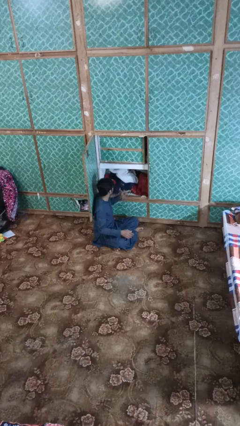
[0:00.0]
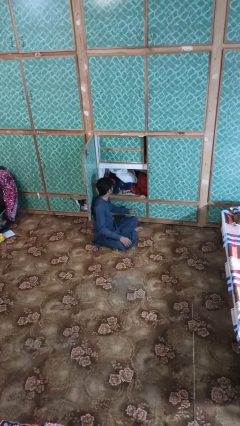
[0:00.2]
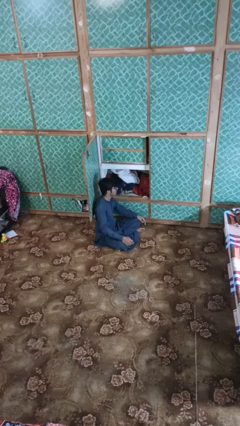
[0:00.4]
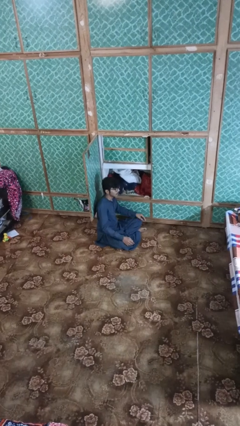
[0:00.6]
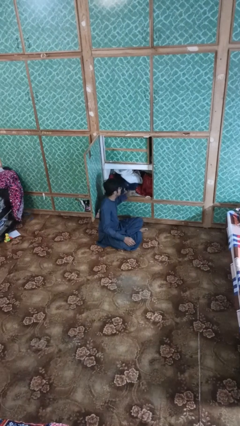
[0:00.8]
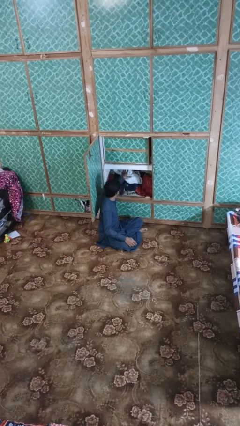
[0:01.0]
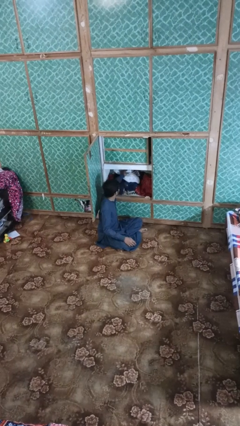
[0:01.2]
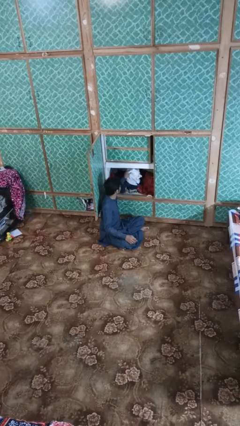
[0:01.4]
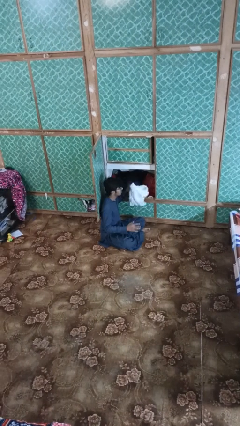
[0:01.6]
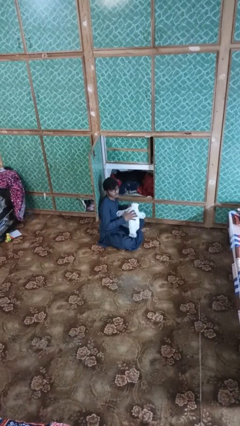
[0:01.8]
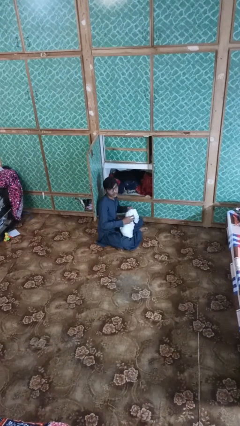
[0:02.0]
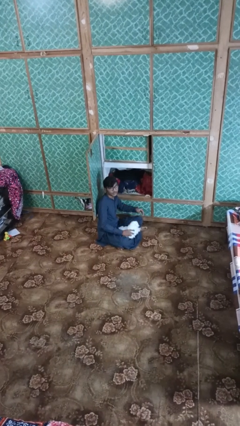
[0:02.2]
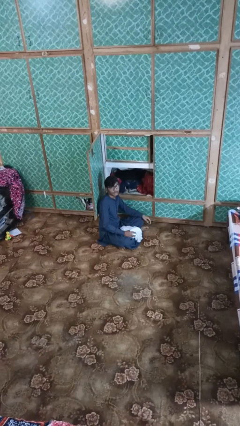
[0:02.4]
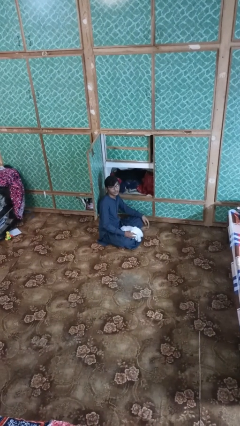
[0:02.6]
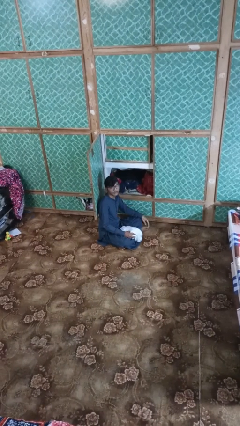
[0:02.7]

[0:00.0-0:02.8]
person takes clothes from dresser

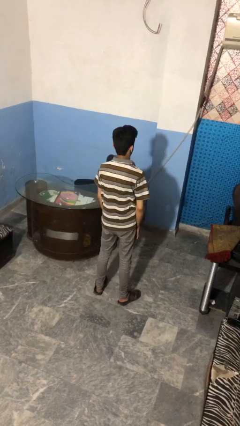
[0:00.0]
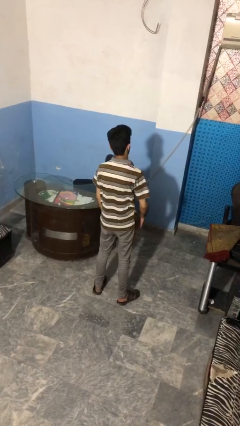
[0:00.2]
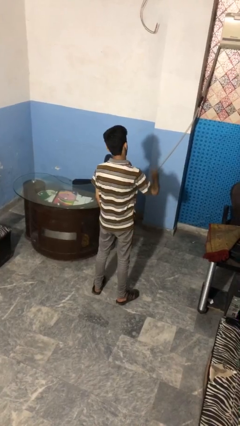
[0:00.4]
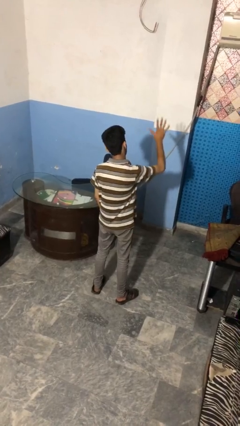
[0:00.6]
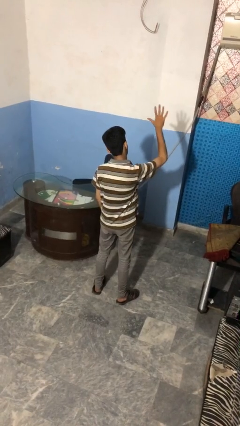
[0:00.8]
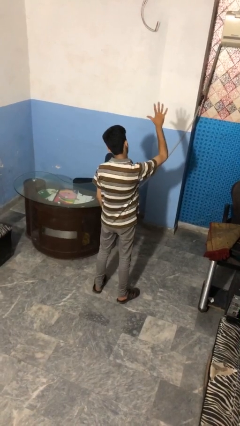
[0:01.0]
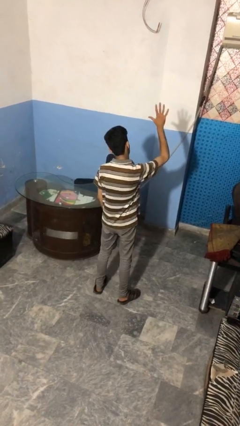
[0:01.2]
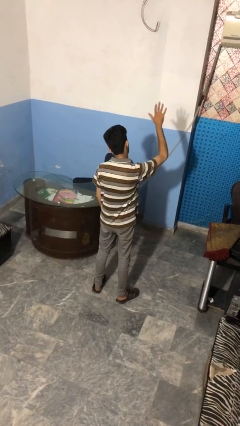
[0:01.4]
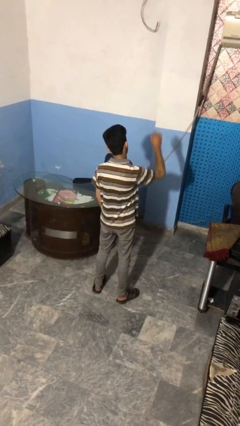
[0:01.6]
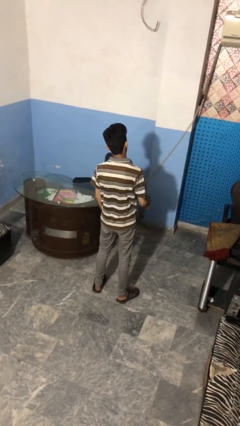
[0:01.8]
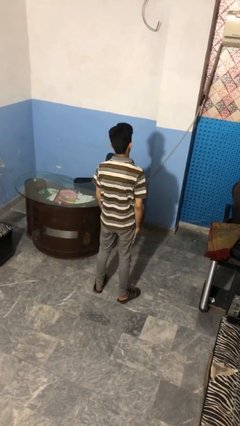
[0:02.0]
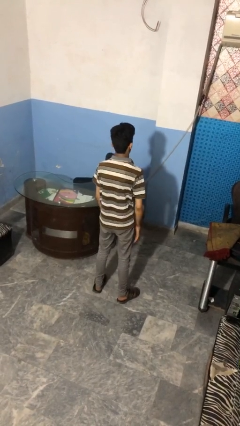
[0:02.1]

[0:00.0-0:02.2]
person gestures number five

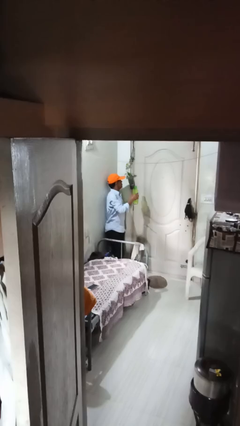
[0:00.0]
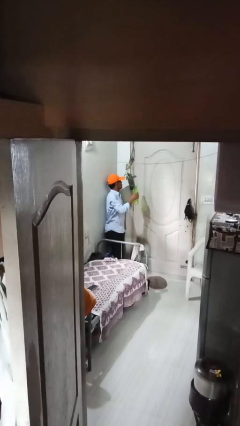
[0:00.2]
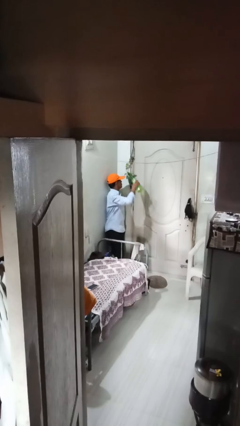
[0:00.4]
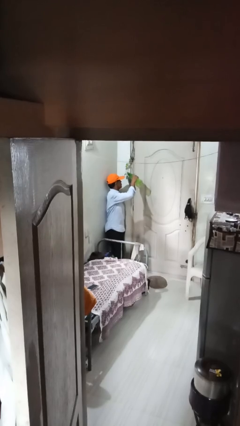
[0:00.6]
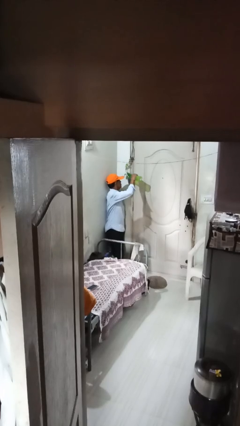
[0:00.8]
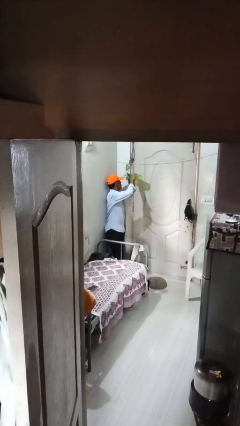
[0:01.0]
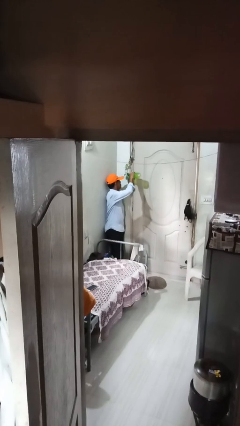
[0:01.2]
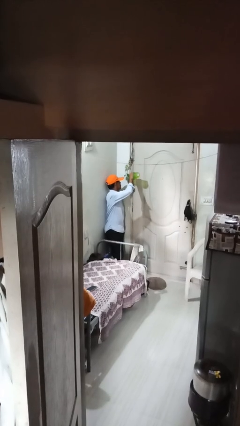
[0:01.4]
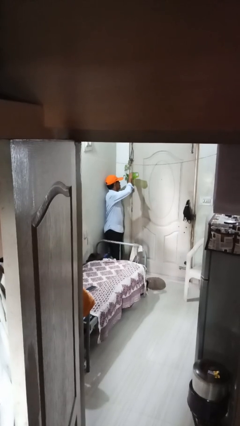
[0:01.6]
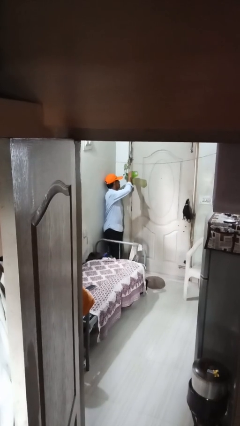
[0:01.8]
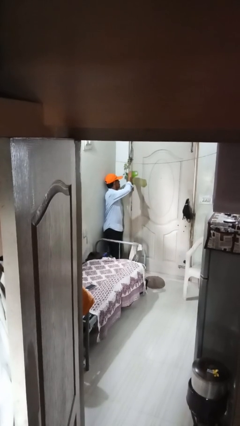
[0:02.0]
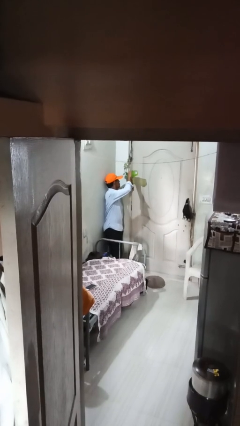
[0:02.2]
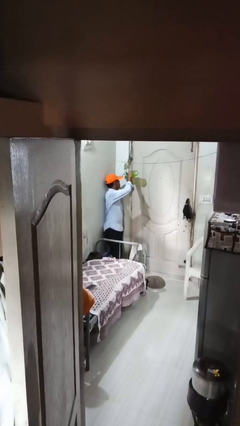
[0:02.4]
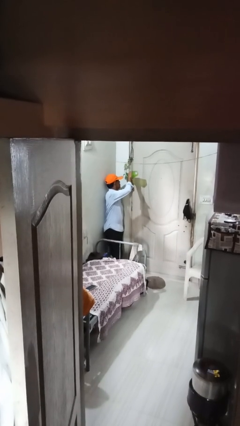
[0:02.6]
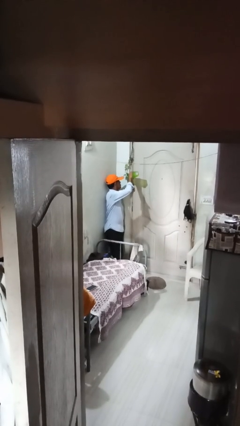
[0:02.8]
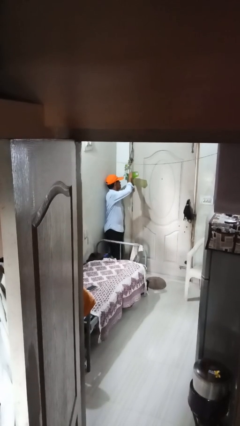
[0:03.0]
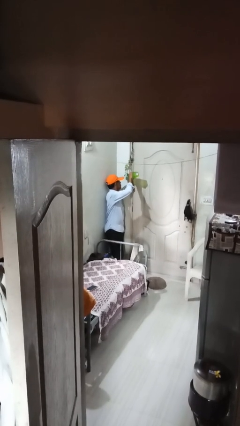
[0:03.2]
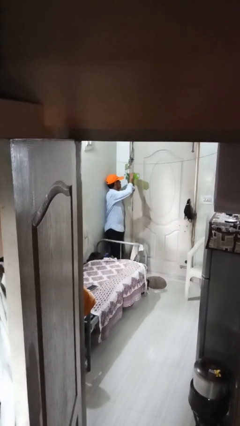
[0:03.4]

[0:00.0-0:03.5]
person waters houseplant

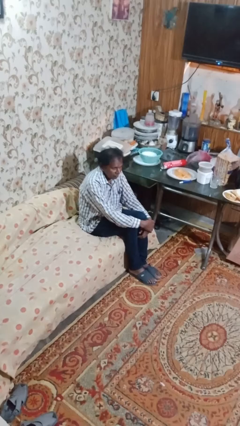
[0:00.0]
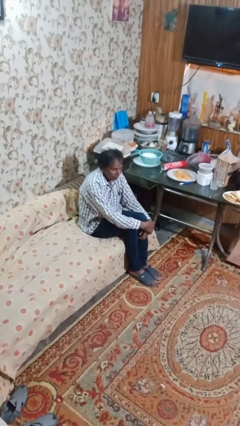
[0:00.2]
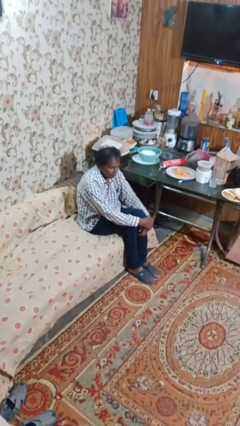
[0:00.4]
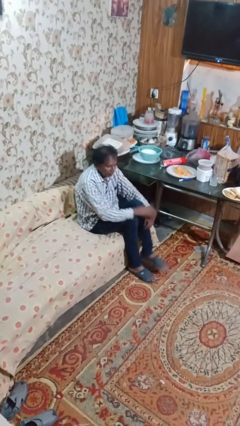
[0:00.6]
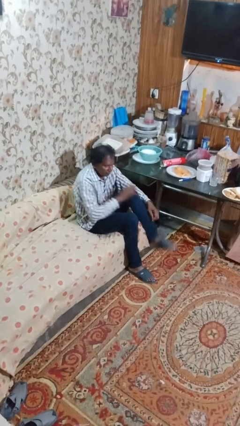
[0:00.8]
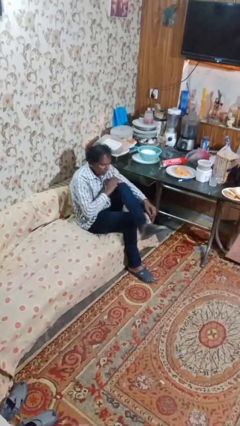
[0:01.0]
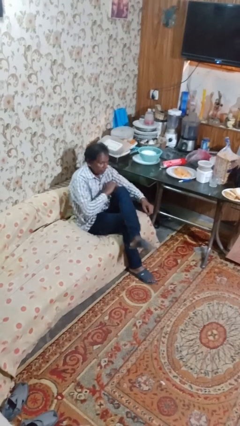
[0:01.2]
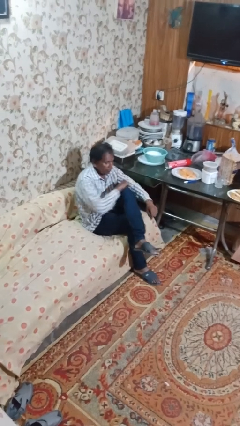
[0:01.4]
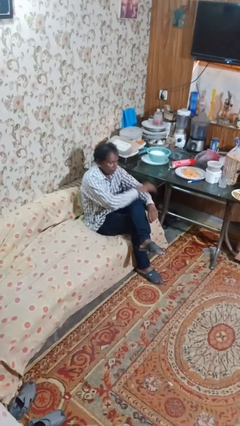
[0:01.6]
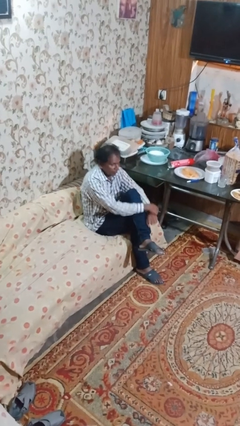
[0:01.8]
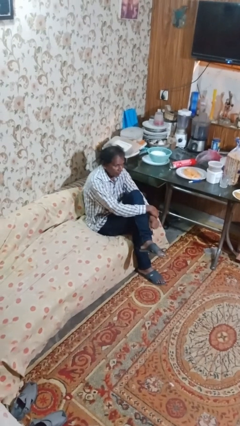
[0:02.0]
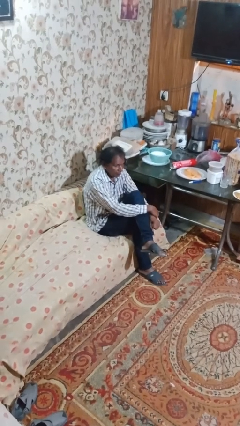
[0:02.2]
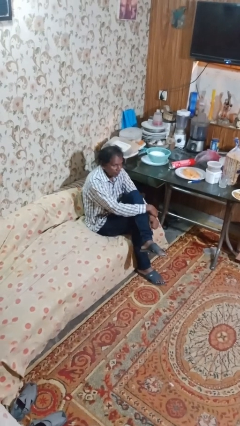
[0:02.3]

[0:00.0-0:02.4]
person crosses legs

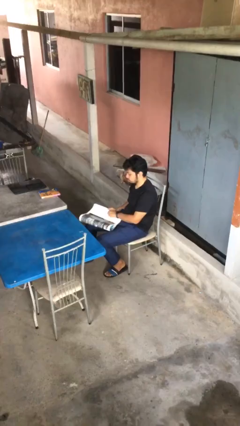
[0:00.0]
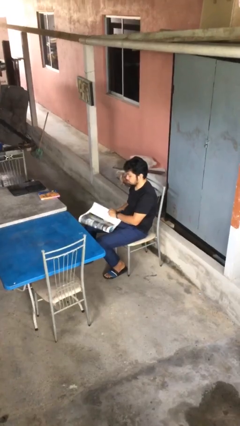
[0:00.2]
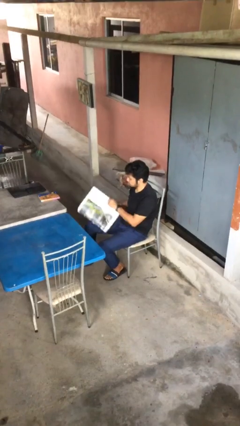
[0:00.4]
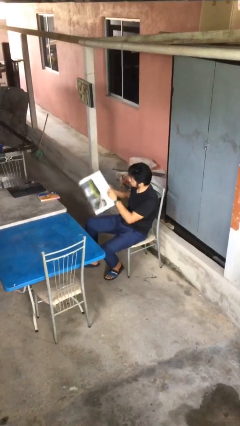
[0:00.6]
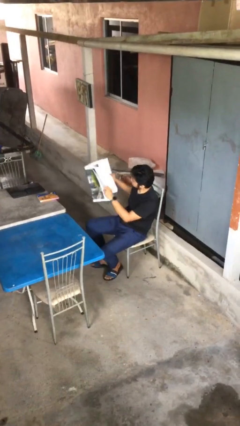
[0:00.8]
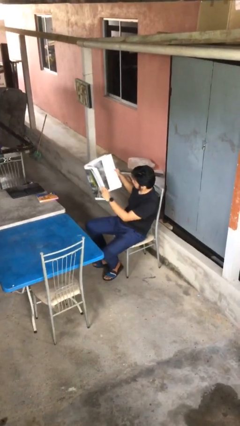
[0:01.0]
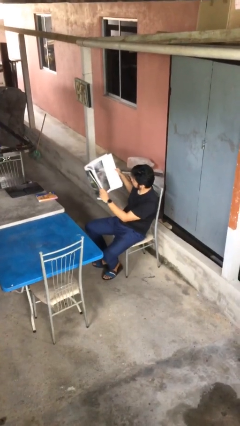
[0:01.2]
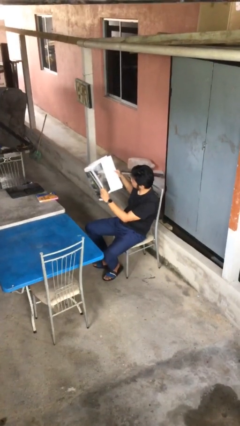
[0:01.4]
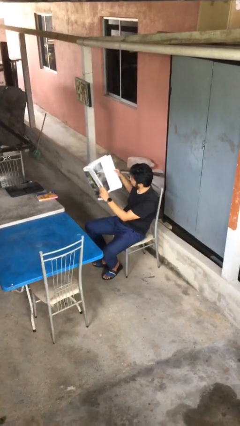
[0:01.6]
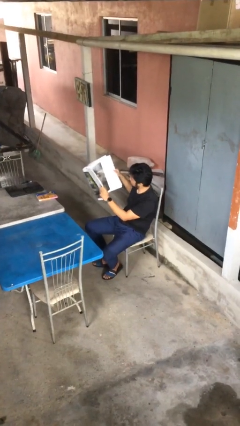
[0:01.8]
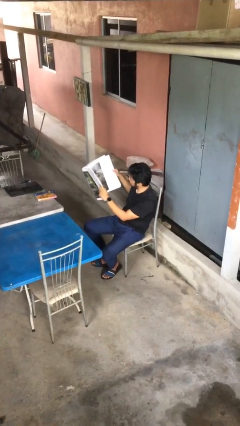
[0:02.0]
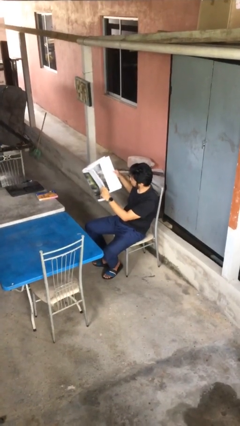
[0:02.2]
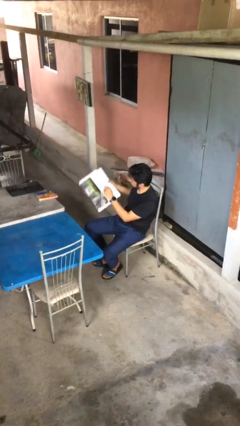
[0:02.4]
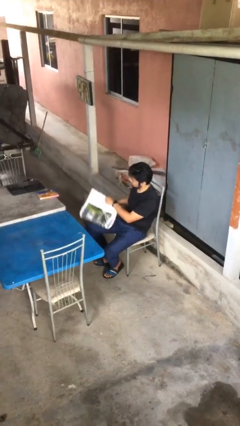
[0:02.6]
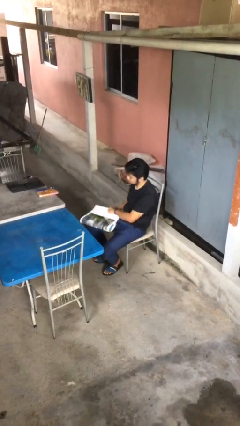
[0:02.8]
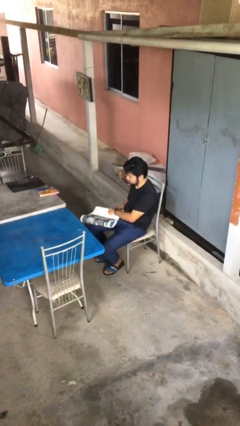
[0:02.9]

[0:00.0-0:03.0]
person reads newspaper

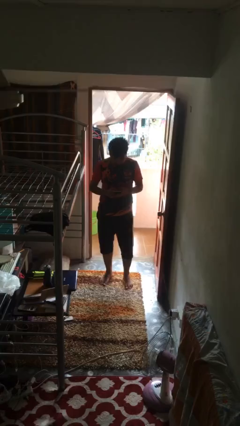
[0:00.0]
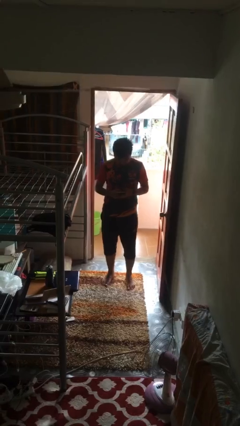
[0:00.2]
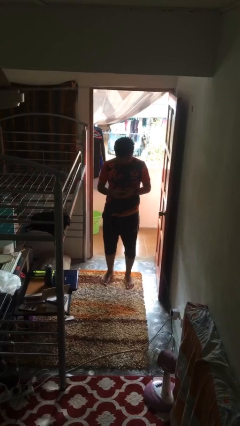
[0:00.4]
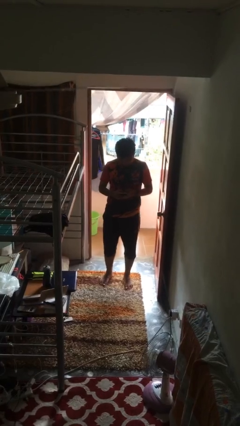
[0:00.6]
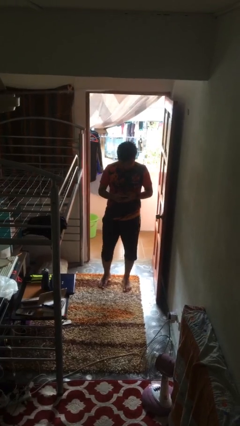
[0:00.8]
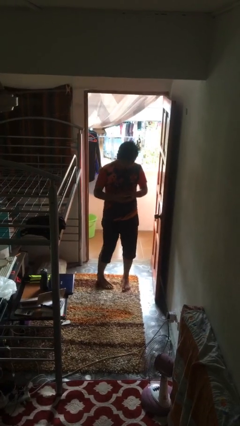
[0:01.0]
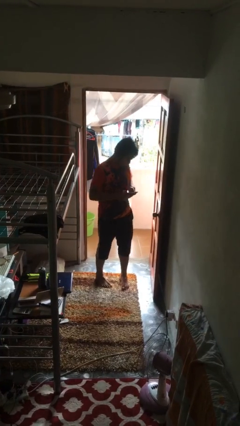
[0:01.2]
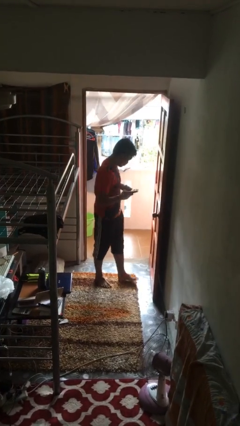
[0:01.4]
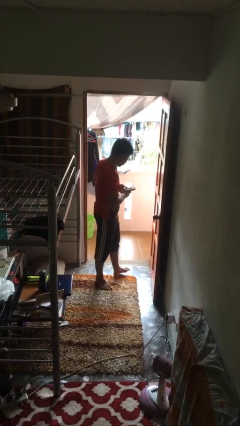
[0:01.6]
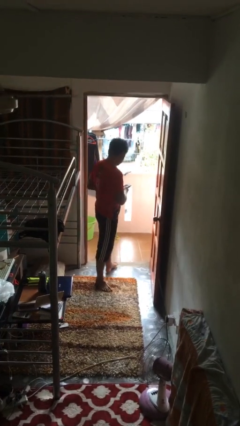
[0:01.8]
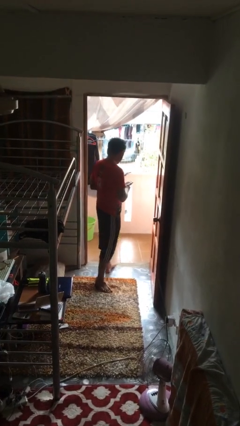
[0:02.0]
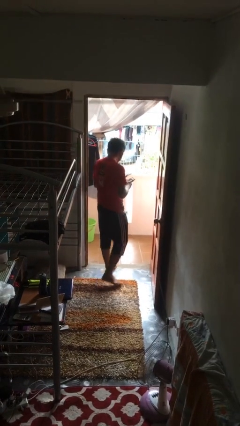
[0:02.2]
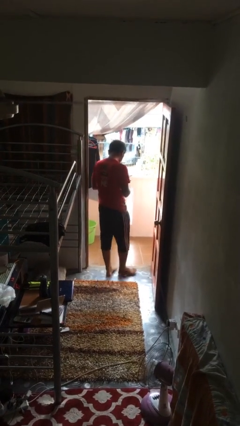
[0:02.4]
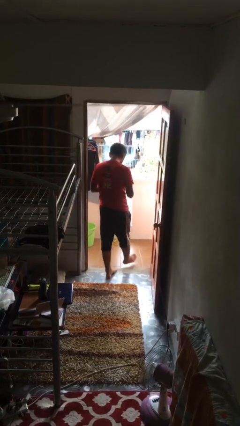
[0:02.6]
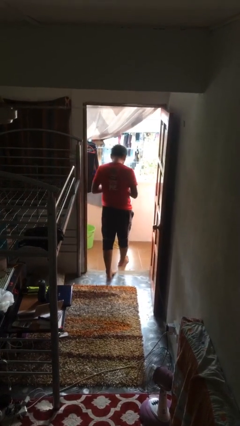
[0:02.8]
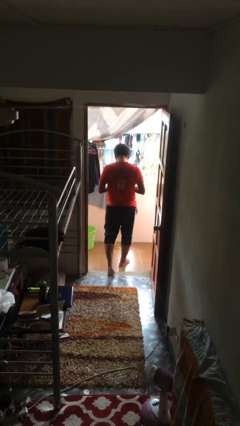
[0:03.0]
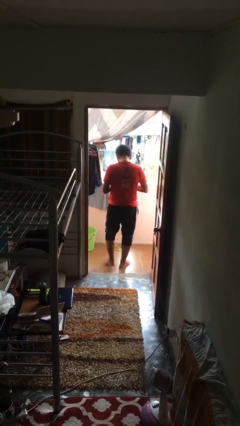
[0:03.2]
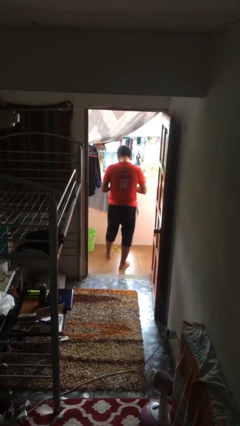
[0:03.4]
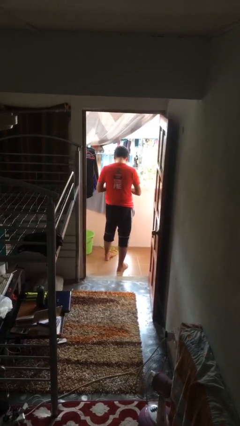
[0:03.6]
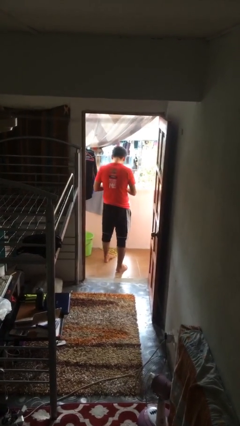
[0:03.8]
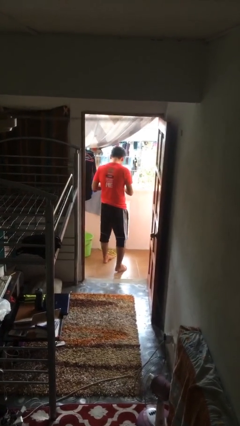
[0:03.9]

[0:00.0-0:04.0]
person exits scene through structure
